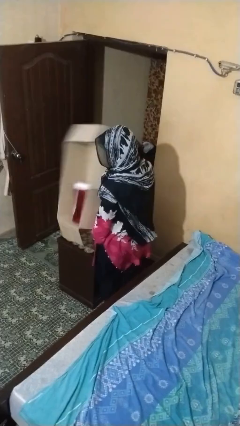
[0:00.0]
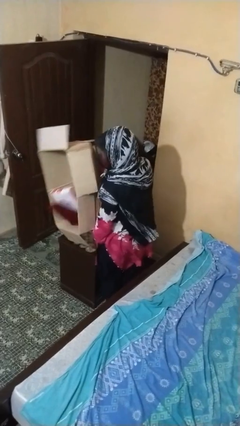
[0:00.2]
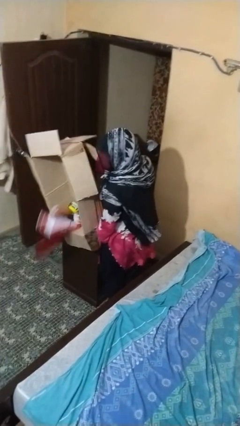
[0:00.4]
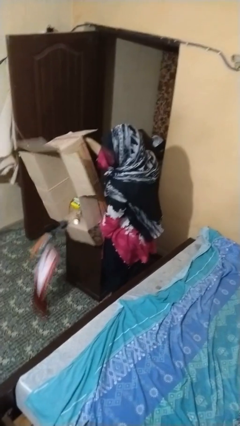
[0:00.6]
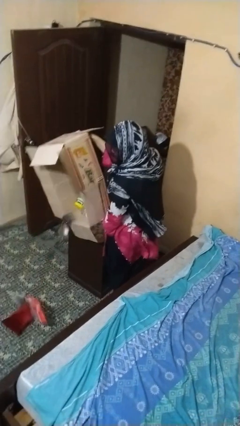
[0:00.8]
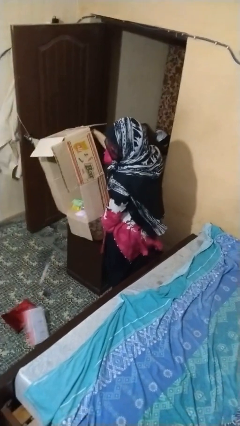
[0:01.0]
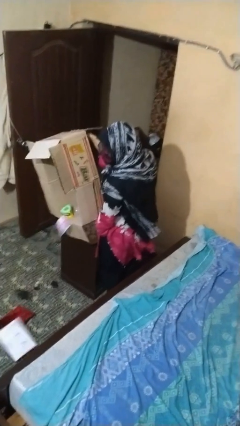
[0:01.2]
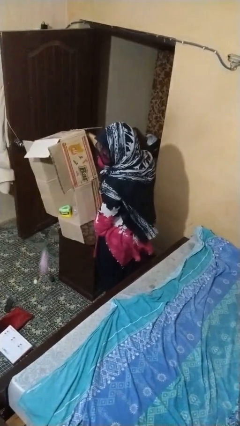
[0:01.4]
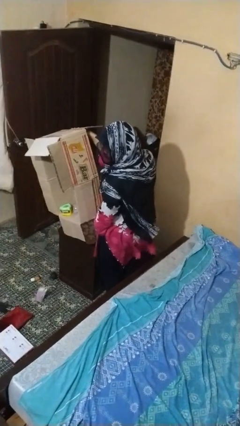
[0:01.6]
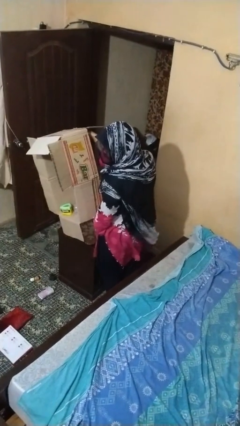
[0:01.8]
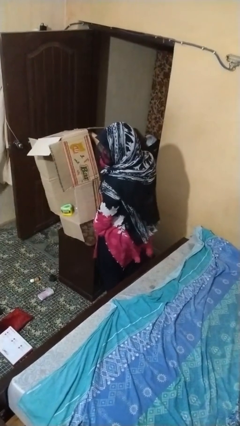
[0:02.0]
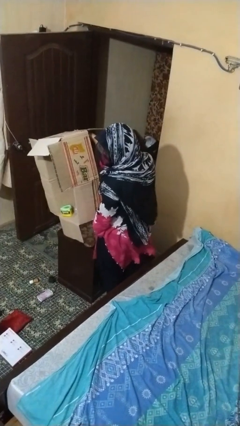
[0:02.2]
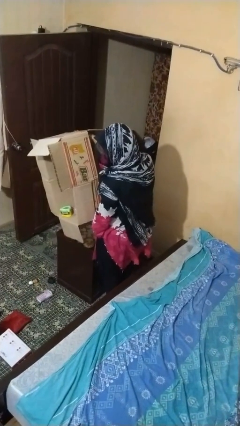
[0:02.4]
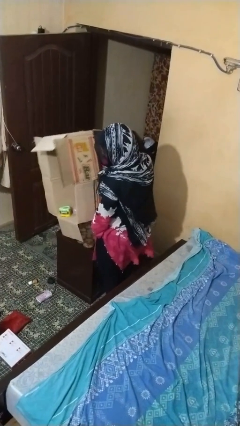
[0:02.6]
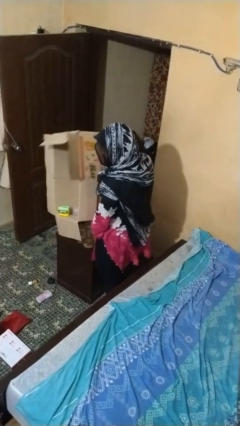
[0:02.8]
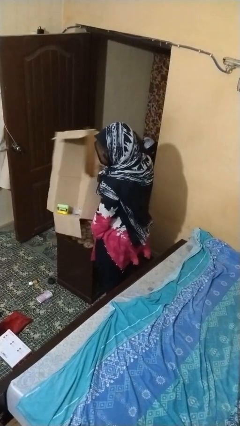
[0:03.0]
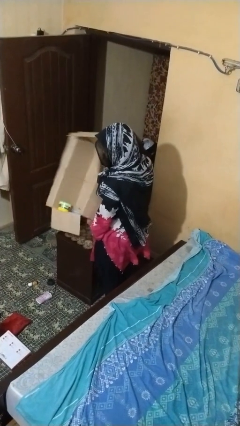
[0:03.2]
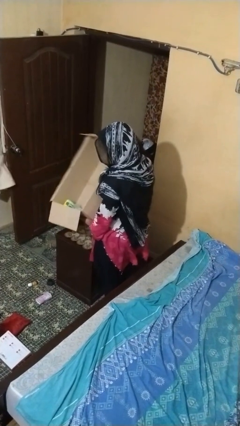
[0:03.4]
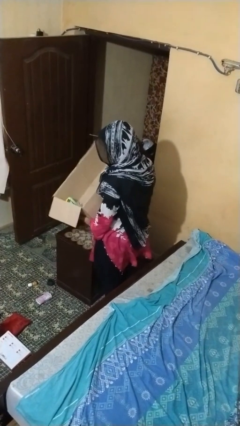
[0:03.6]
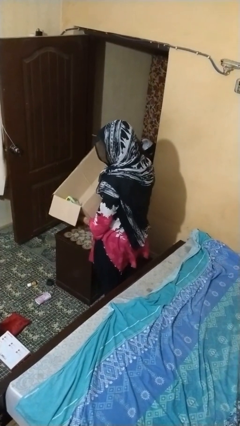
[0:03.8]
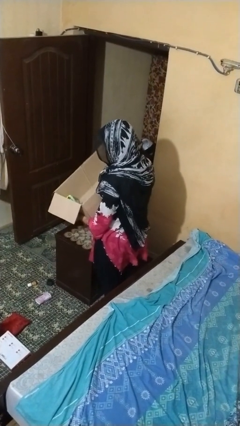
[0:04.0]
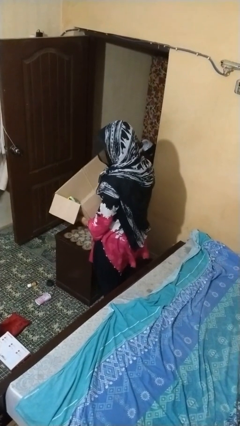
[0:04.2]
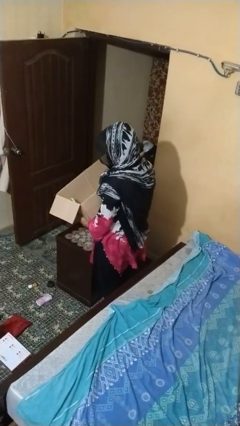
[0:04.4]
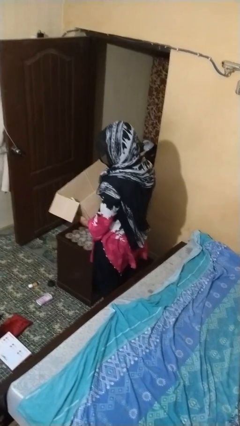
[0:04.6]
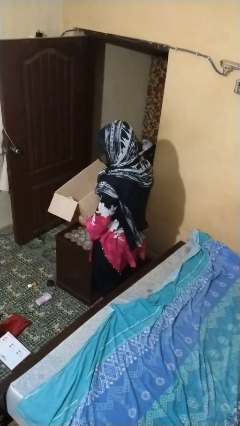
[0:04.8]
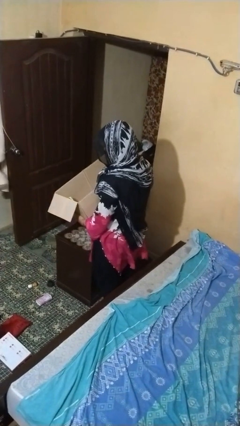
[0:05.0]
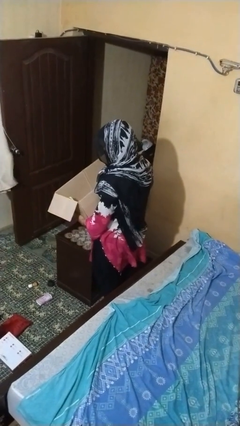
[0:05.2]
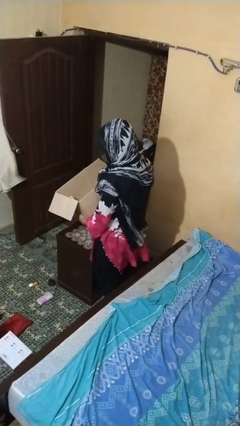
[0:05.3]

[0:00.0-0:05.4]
person unloads box onto floor

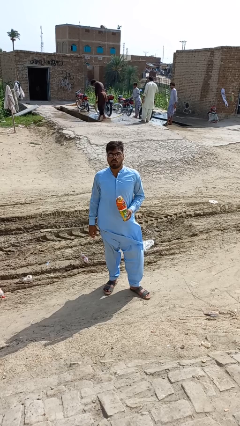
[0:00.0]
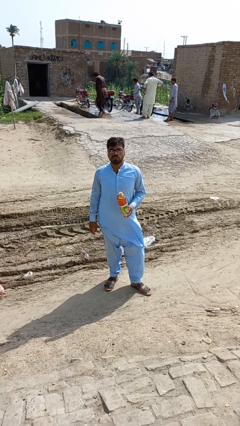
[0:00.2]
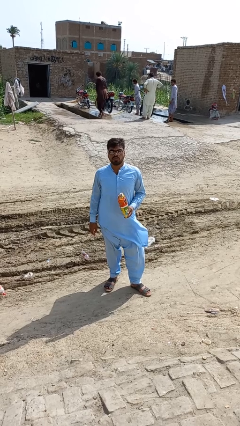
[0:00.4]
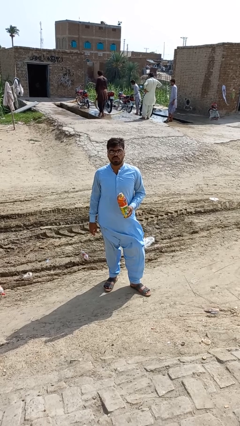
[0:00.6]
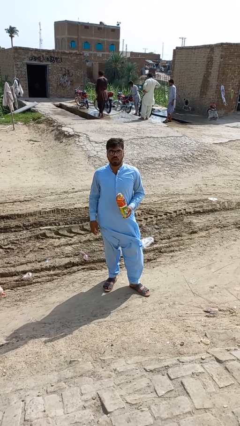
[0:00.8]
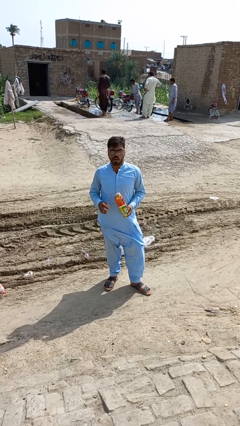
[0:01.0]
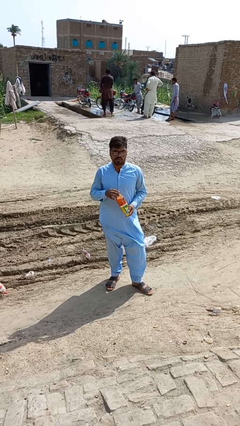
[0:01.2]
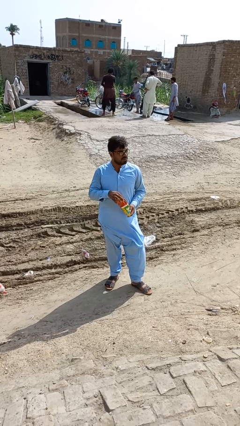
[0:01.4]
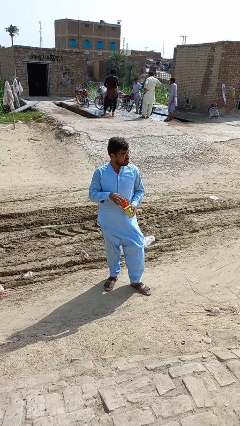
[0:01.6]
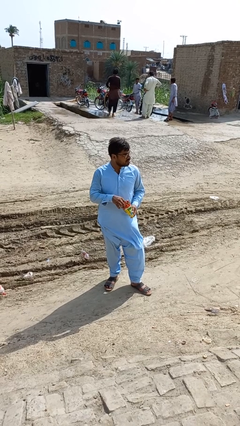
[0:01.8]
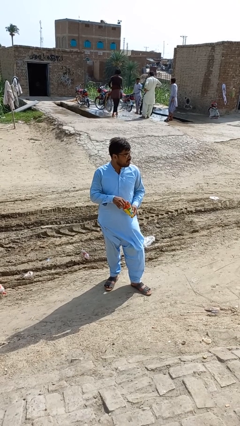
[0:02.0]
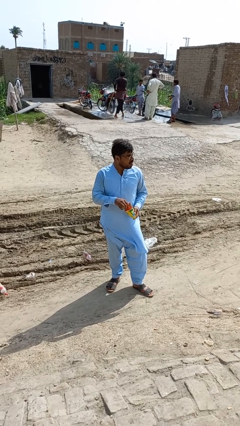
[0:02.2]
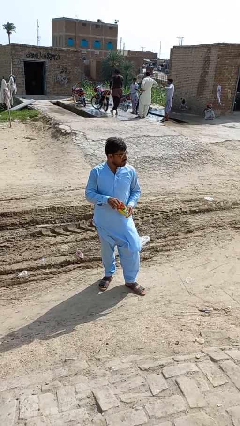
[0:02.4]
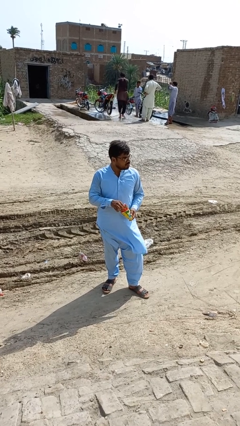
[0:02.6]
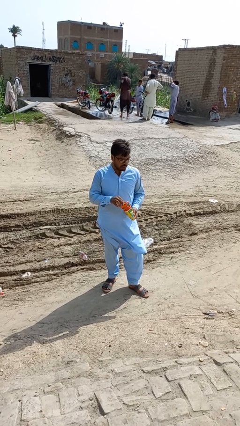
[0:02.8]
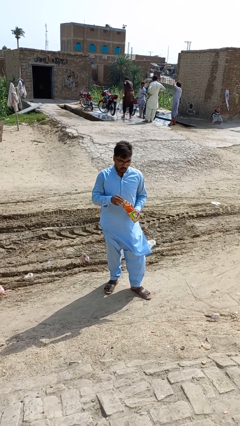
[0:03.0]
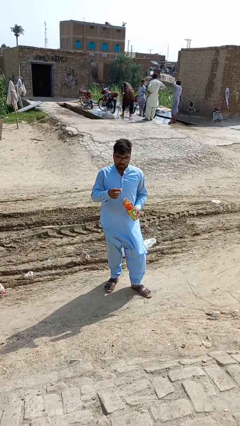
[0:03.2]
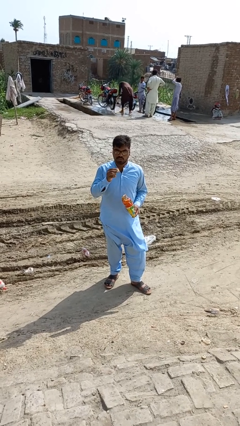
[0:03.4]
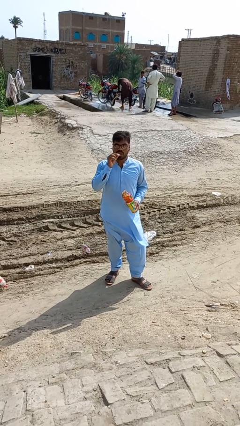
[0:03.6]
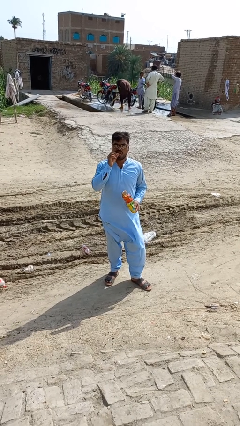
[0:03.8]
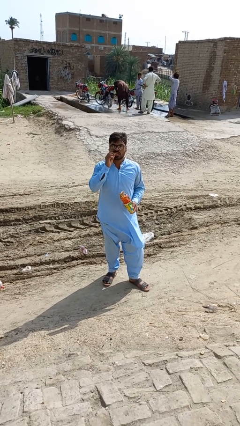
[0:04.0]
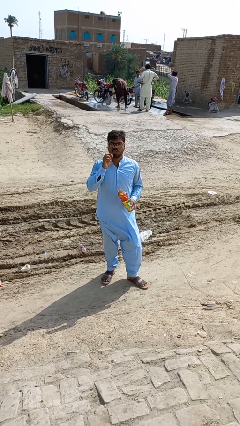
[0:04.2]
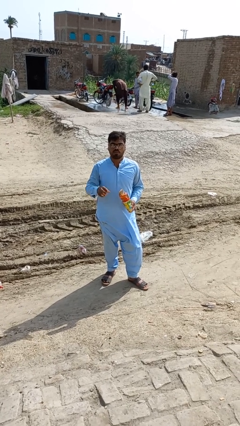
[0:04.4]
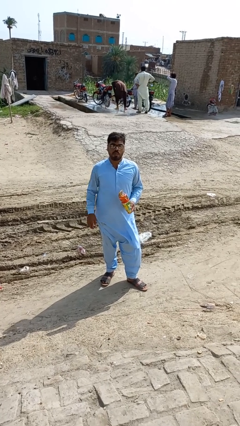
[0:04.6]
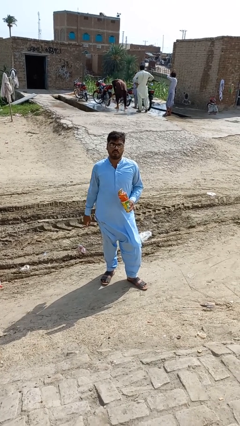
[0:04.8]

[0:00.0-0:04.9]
person eats snack from bag

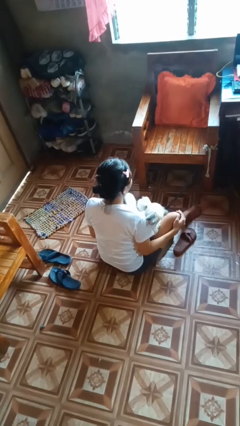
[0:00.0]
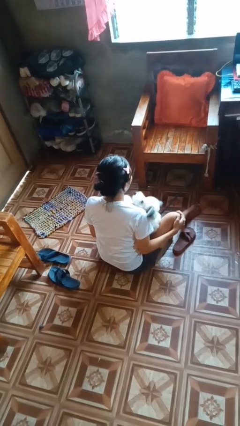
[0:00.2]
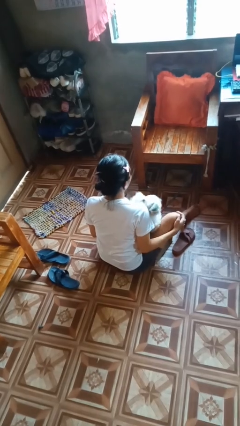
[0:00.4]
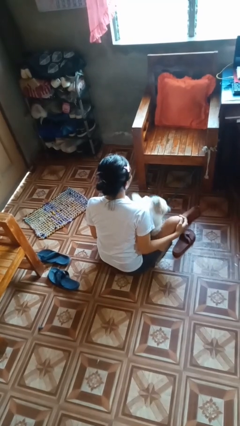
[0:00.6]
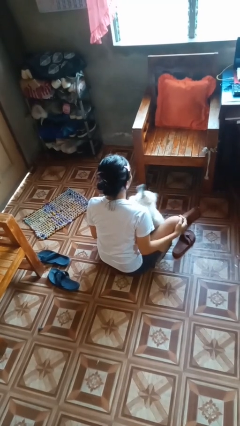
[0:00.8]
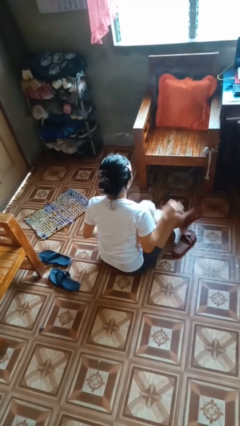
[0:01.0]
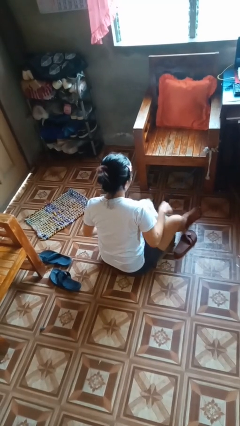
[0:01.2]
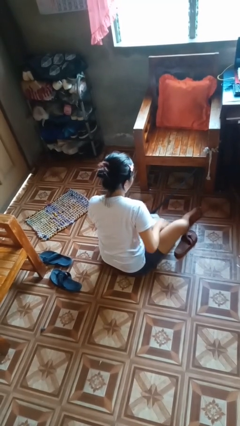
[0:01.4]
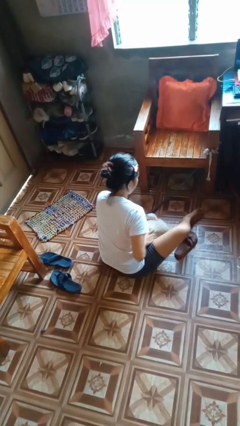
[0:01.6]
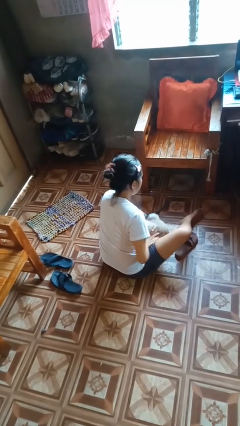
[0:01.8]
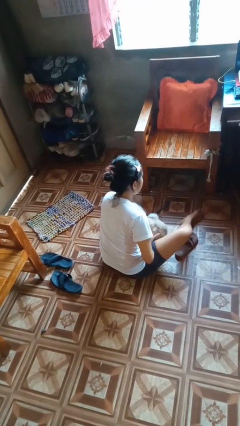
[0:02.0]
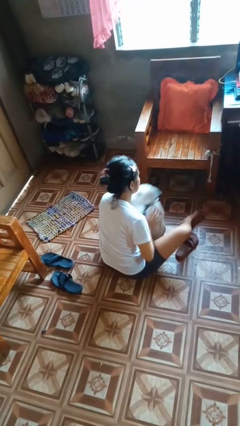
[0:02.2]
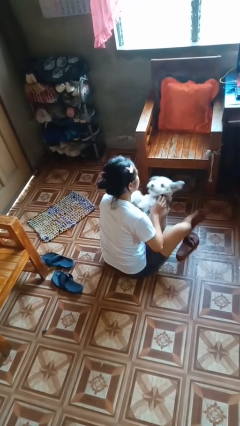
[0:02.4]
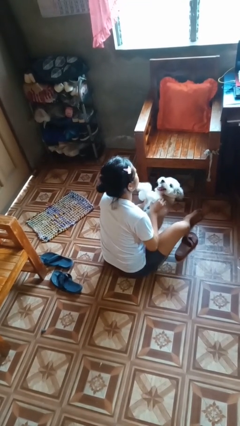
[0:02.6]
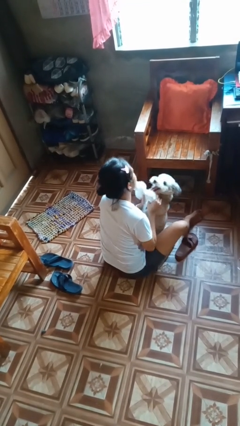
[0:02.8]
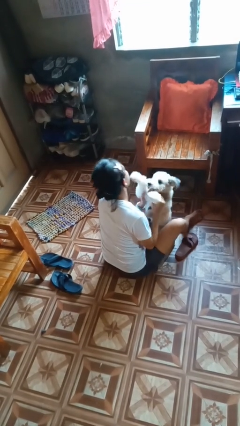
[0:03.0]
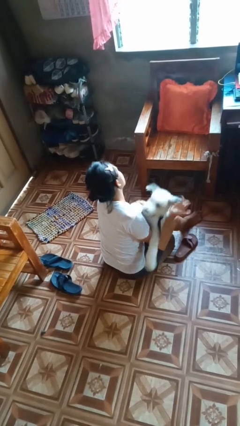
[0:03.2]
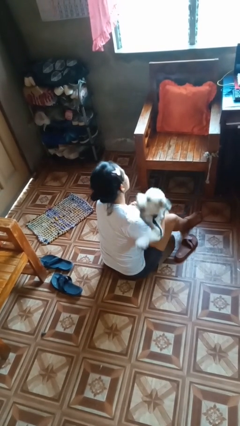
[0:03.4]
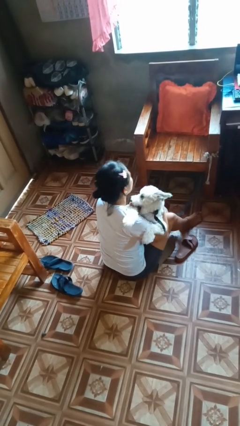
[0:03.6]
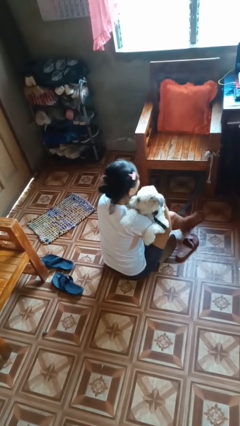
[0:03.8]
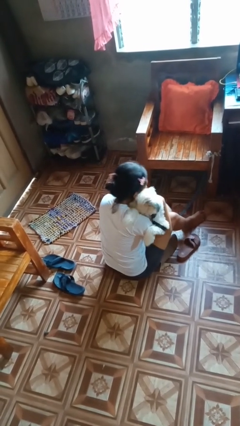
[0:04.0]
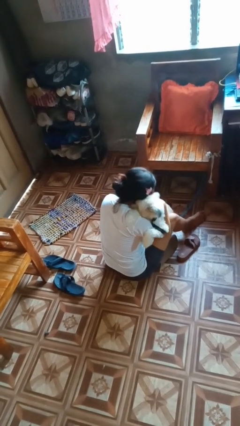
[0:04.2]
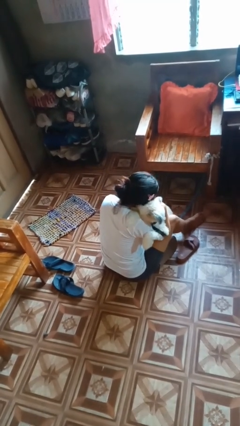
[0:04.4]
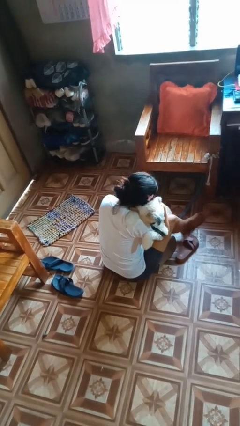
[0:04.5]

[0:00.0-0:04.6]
person hugs dog

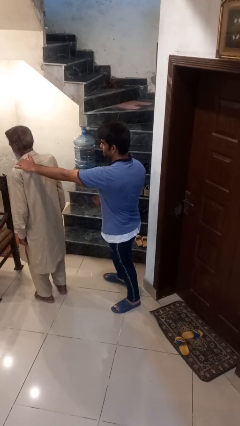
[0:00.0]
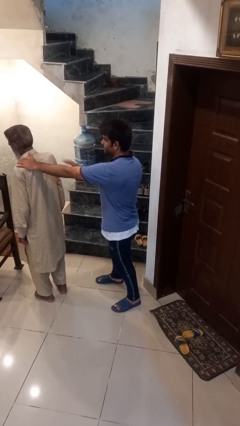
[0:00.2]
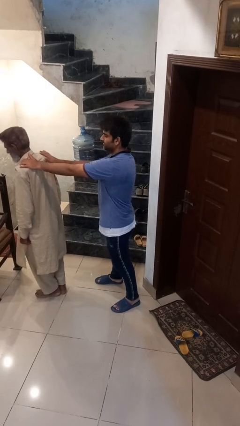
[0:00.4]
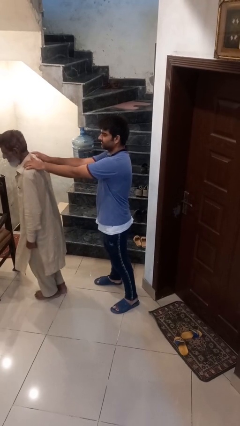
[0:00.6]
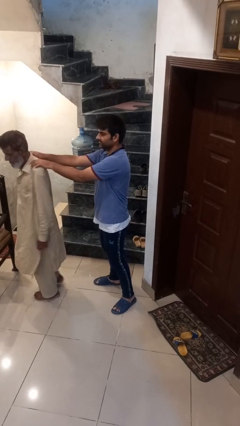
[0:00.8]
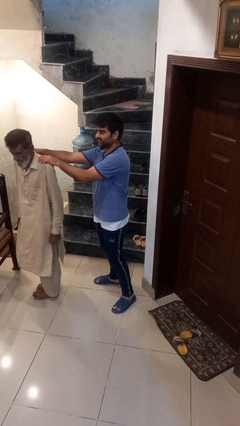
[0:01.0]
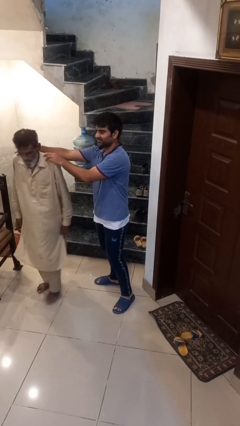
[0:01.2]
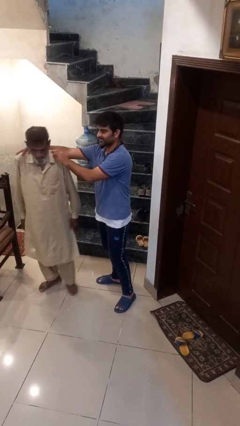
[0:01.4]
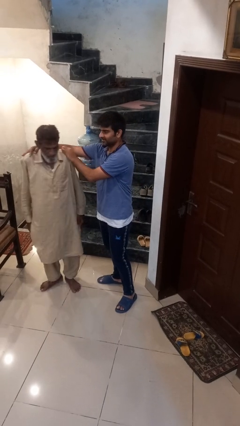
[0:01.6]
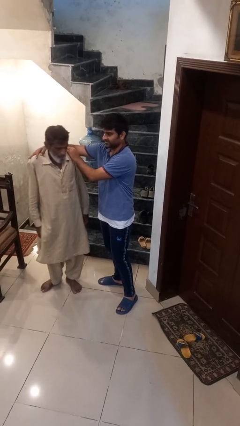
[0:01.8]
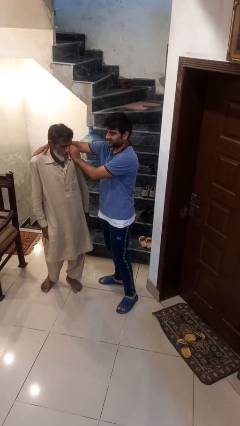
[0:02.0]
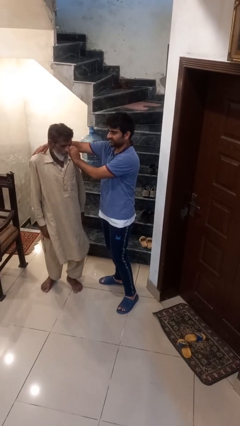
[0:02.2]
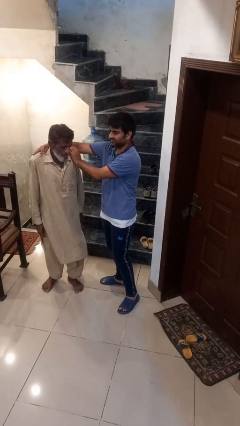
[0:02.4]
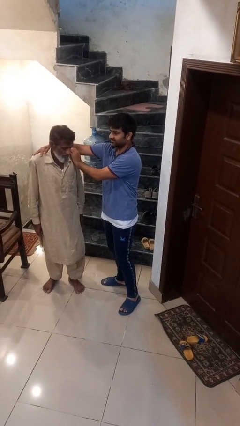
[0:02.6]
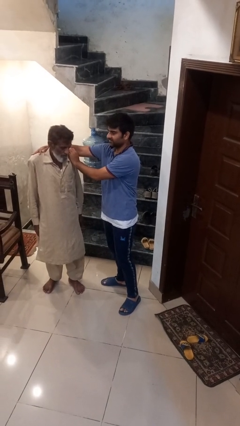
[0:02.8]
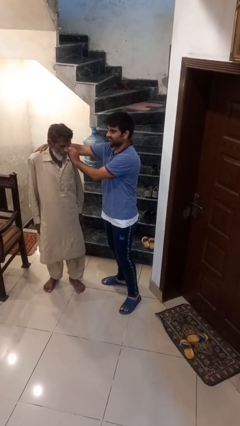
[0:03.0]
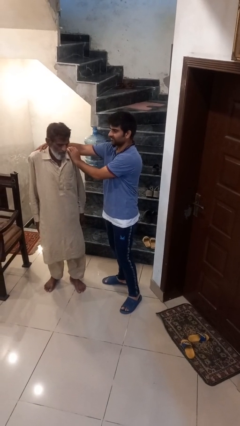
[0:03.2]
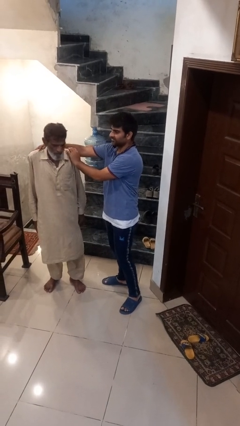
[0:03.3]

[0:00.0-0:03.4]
person spins person around
